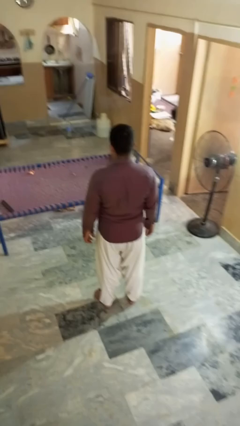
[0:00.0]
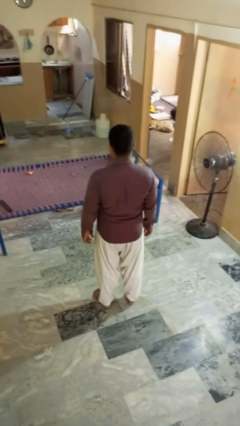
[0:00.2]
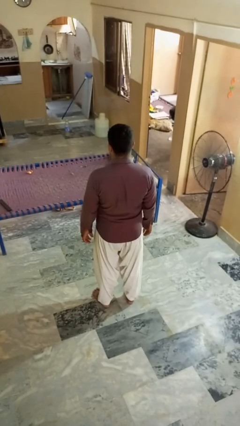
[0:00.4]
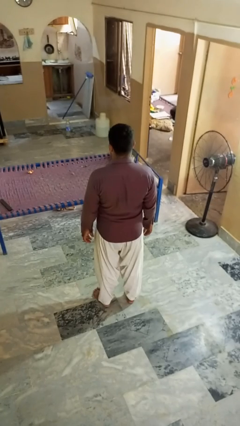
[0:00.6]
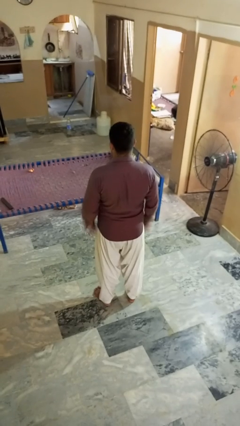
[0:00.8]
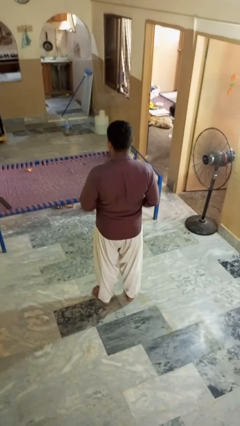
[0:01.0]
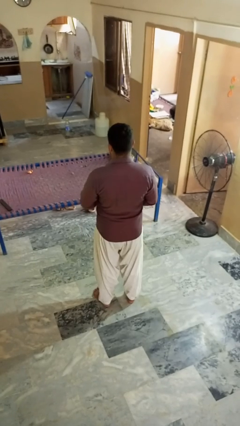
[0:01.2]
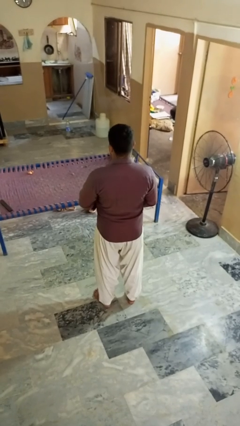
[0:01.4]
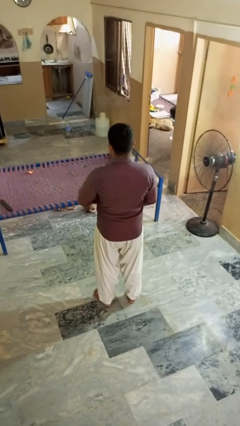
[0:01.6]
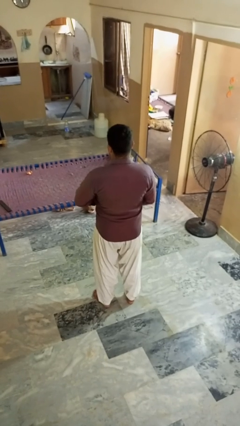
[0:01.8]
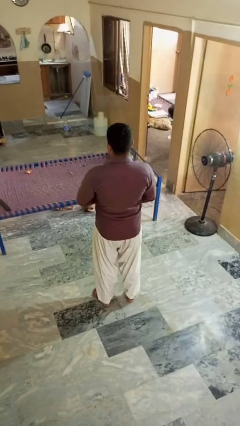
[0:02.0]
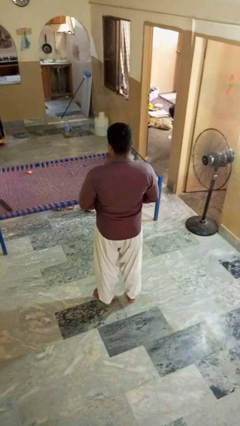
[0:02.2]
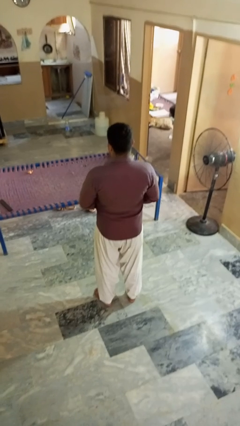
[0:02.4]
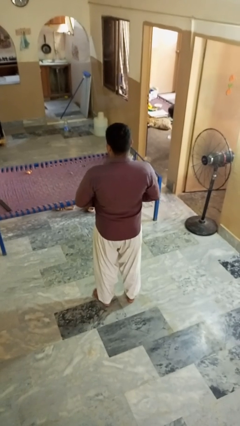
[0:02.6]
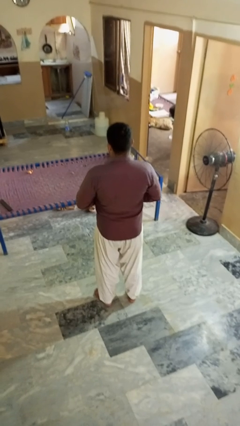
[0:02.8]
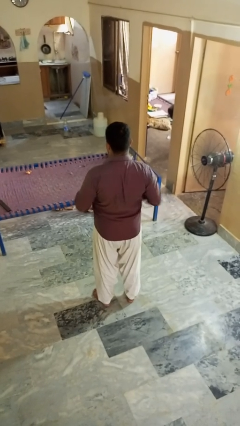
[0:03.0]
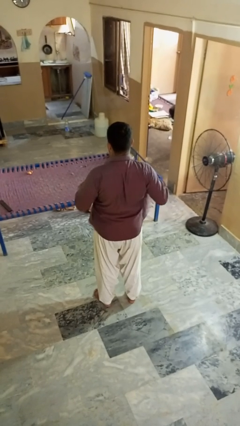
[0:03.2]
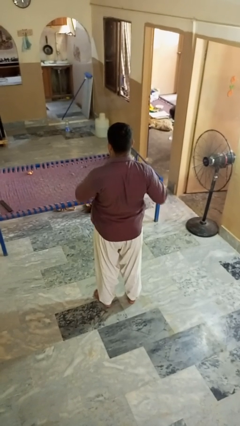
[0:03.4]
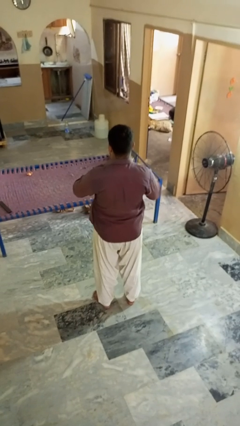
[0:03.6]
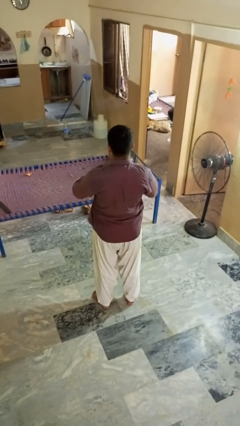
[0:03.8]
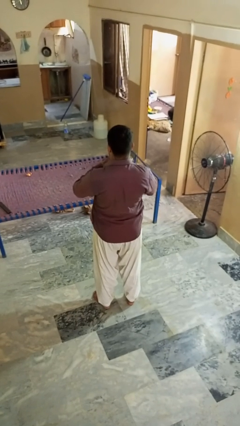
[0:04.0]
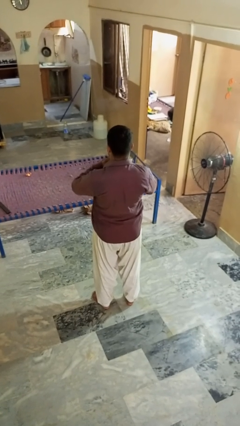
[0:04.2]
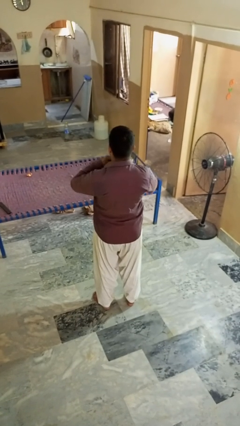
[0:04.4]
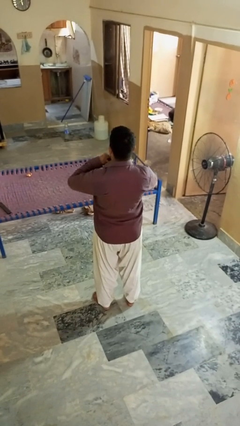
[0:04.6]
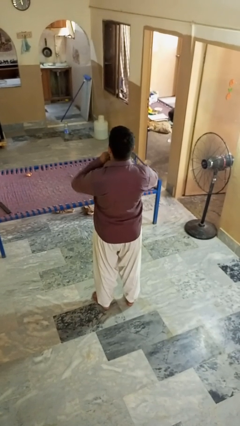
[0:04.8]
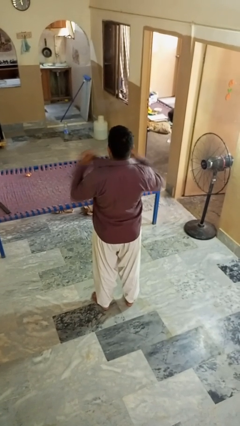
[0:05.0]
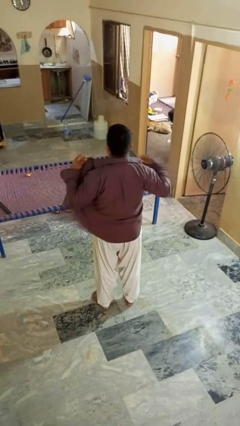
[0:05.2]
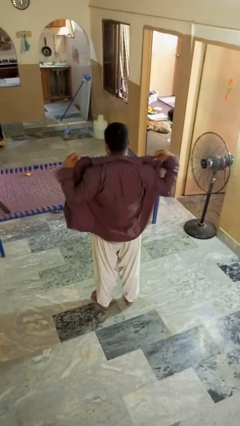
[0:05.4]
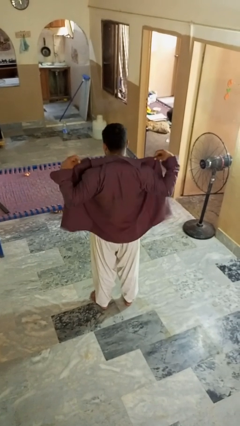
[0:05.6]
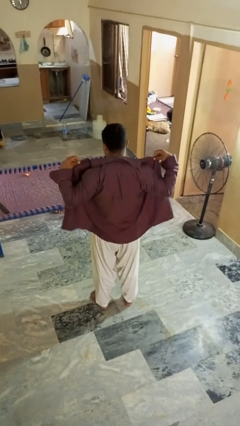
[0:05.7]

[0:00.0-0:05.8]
person unbuttons shirt

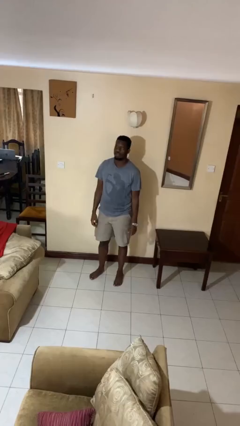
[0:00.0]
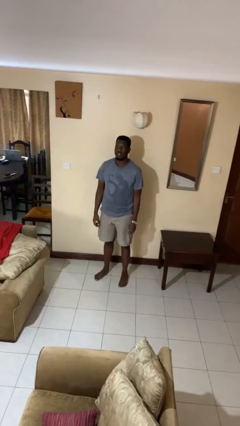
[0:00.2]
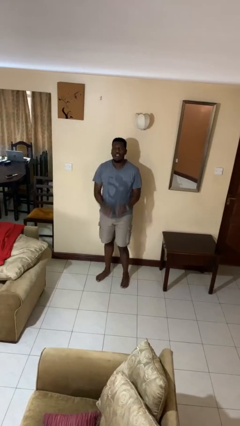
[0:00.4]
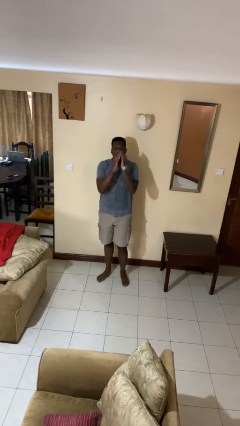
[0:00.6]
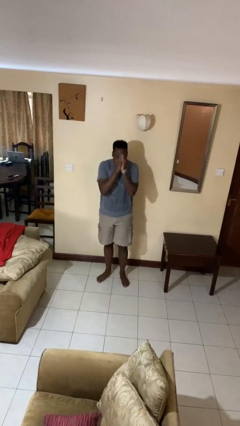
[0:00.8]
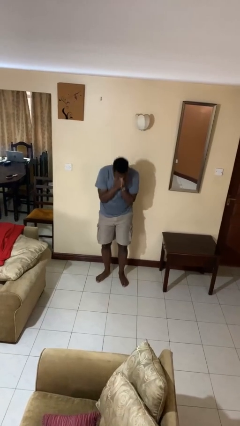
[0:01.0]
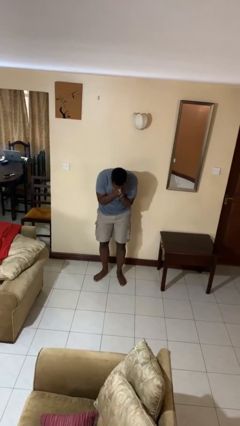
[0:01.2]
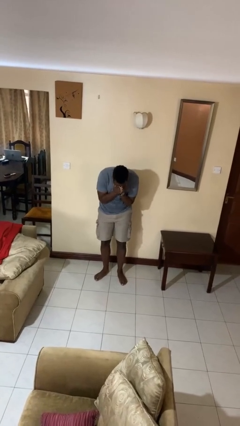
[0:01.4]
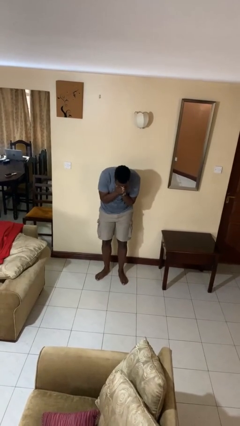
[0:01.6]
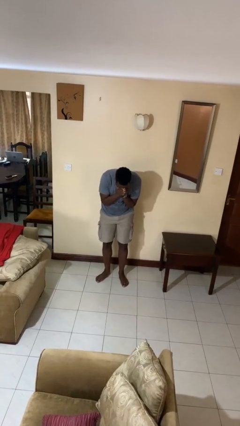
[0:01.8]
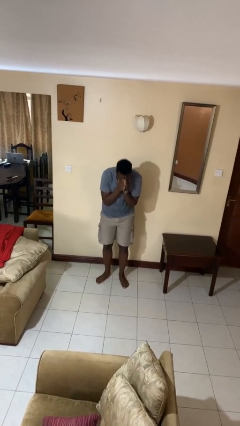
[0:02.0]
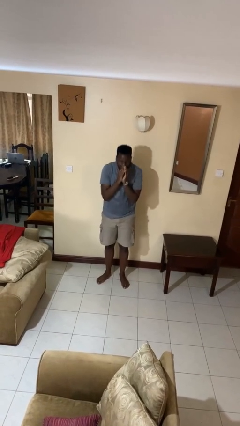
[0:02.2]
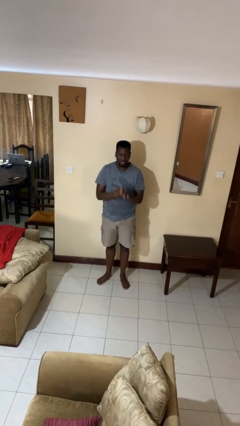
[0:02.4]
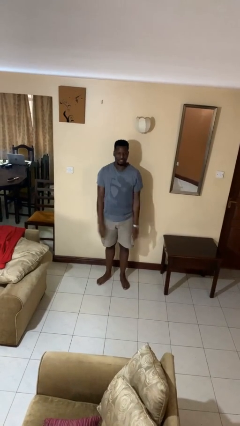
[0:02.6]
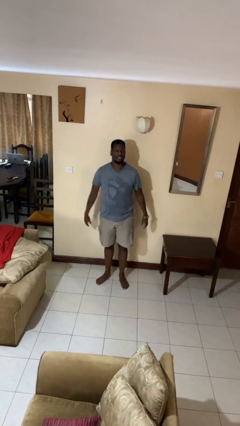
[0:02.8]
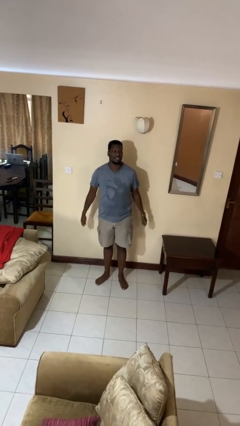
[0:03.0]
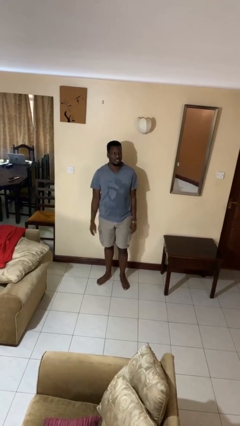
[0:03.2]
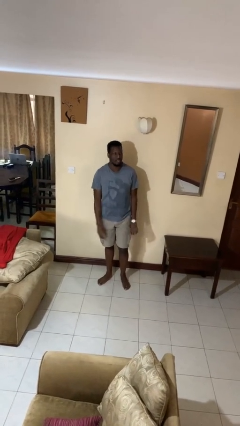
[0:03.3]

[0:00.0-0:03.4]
person sneezes into hand

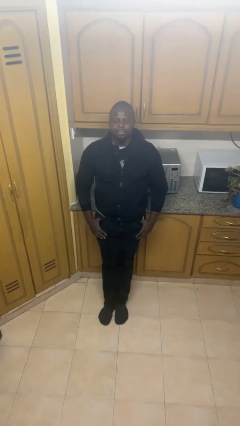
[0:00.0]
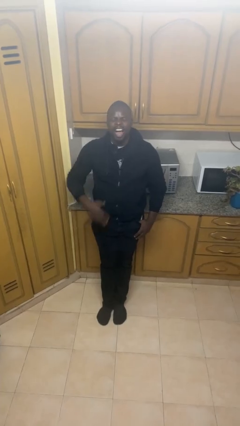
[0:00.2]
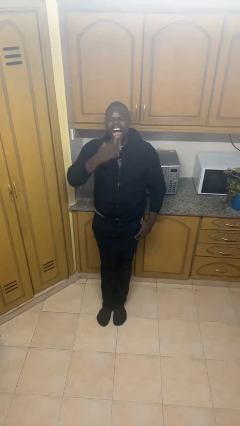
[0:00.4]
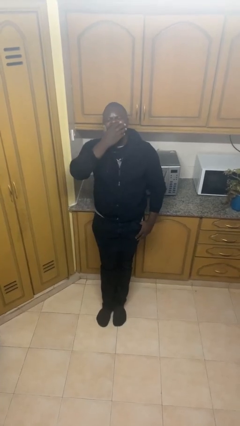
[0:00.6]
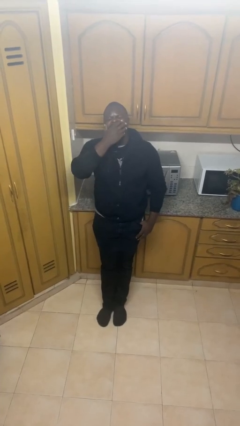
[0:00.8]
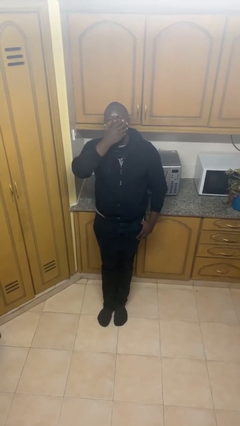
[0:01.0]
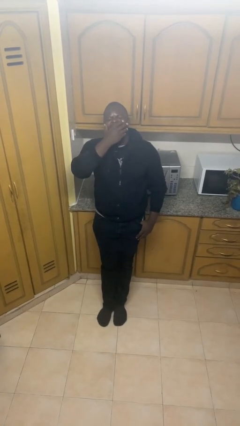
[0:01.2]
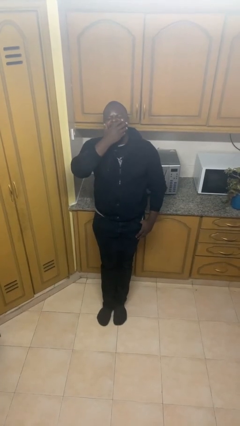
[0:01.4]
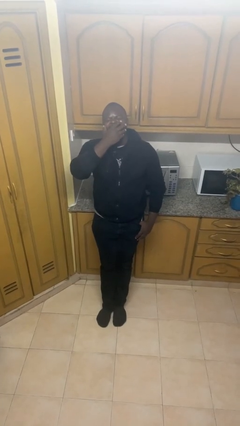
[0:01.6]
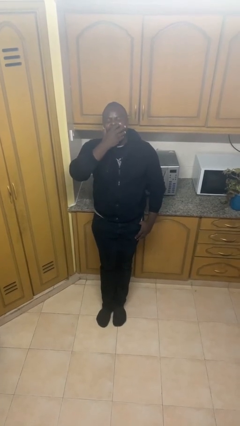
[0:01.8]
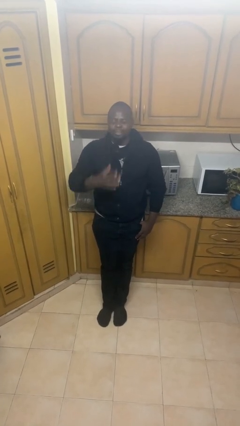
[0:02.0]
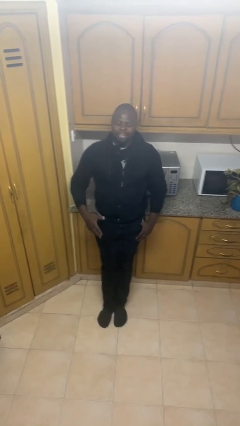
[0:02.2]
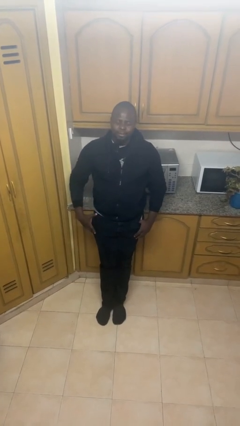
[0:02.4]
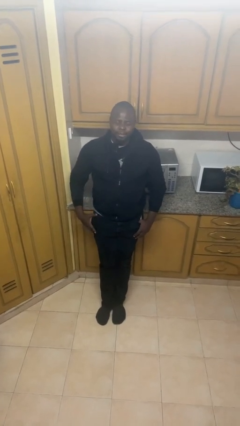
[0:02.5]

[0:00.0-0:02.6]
person yawns

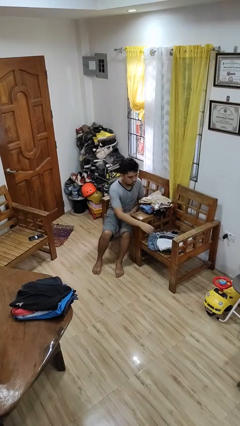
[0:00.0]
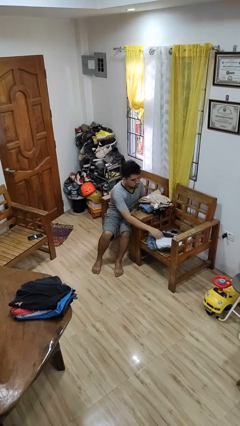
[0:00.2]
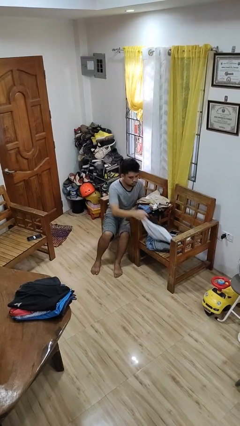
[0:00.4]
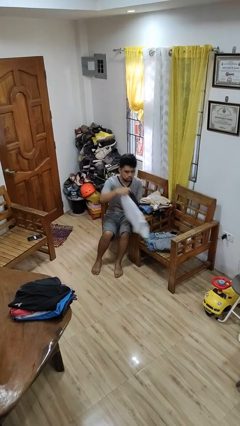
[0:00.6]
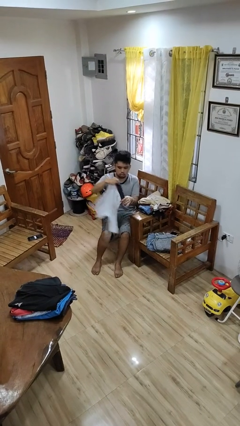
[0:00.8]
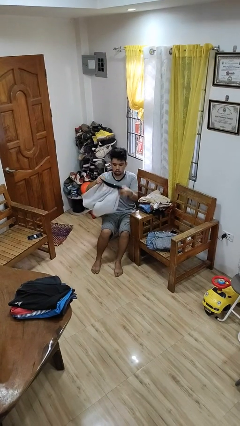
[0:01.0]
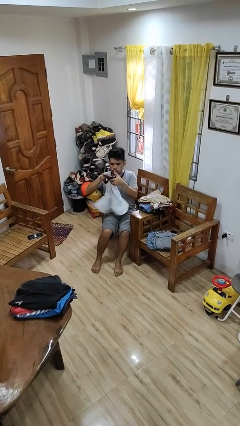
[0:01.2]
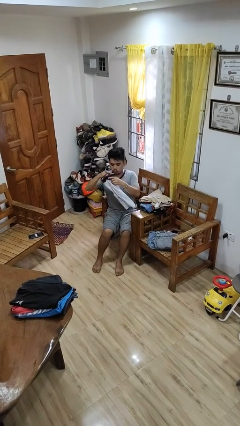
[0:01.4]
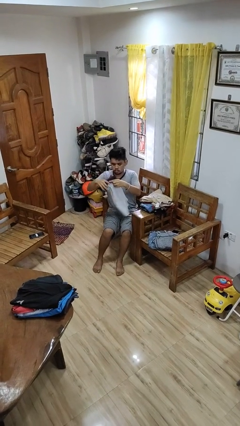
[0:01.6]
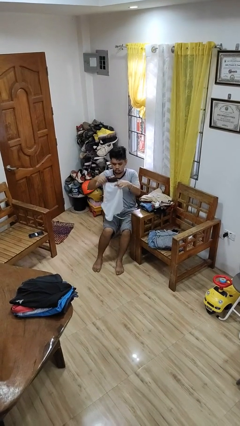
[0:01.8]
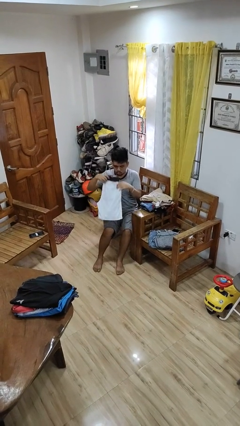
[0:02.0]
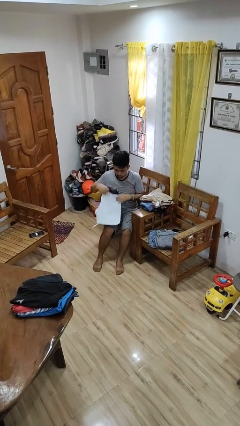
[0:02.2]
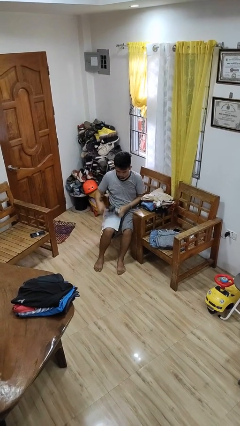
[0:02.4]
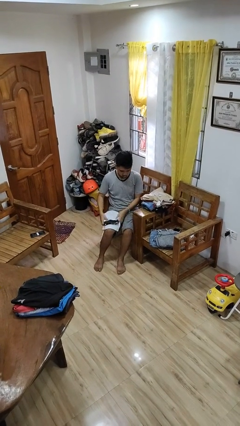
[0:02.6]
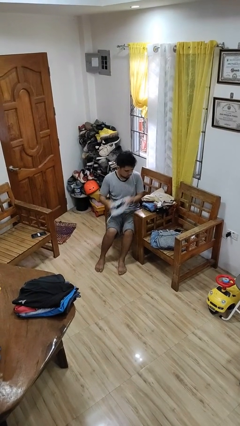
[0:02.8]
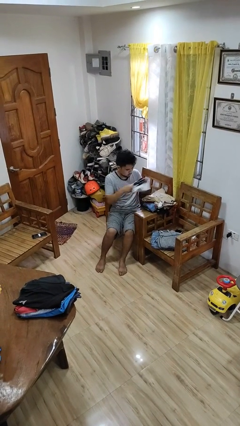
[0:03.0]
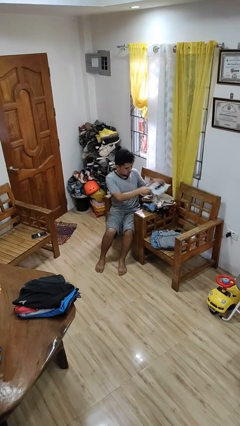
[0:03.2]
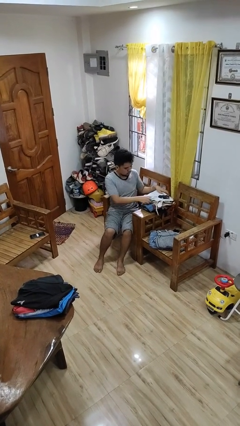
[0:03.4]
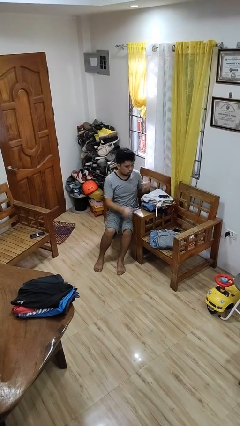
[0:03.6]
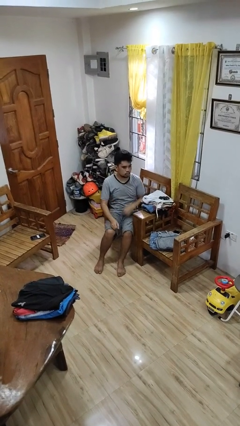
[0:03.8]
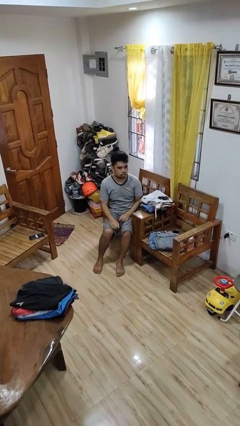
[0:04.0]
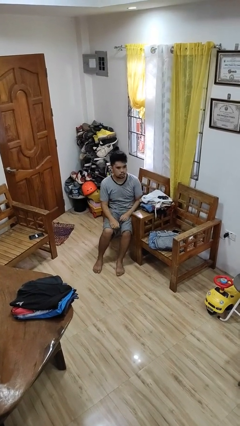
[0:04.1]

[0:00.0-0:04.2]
person folds pants

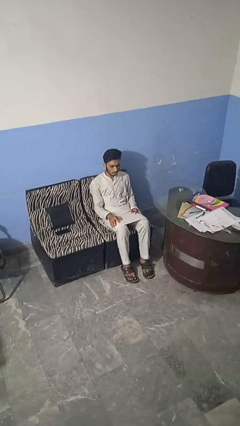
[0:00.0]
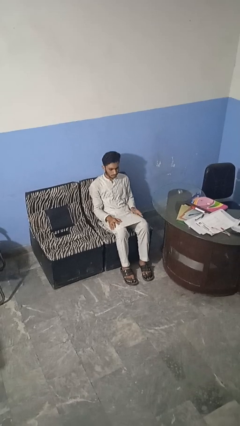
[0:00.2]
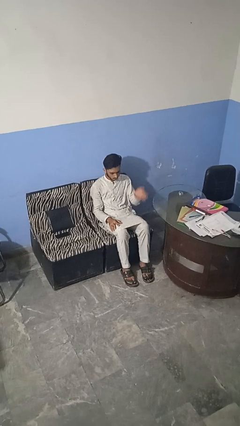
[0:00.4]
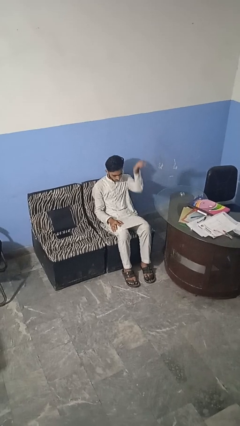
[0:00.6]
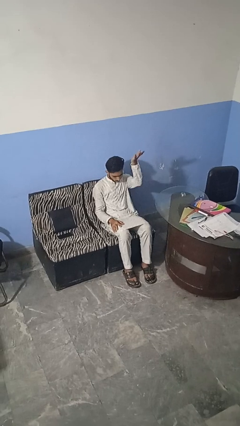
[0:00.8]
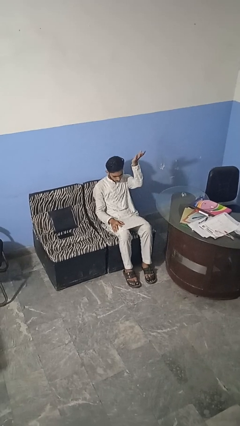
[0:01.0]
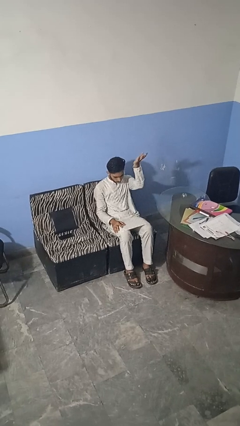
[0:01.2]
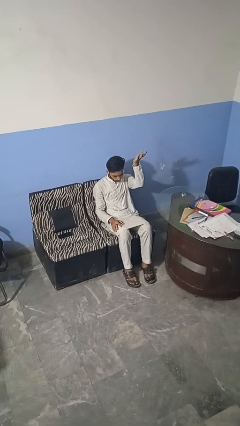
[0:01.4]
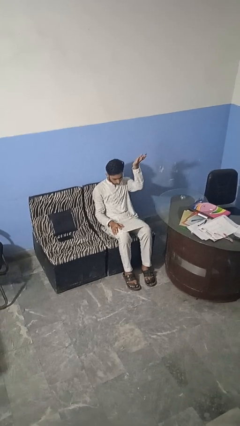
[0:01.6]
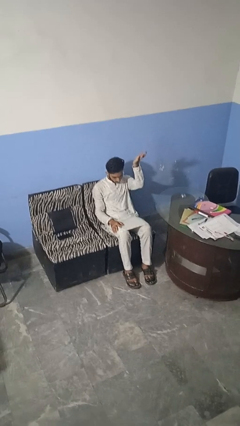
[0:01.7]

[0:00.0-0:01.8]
person gestures swipe up
